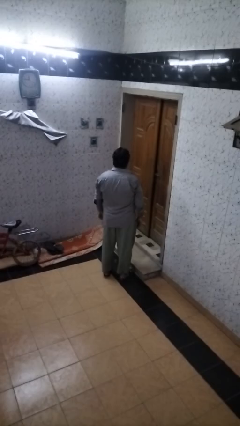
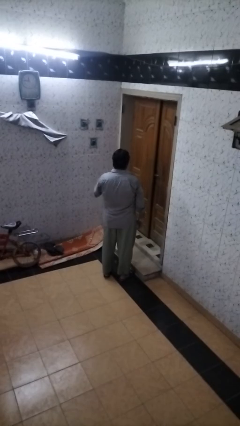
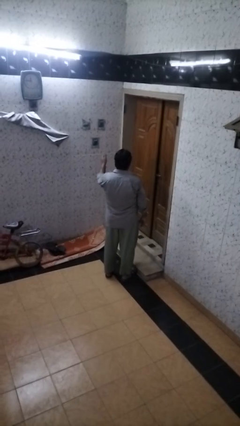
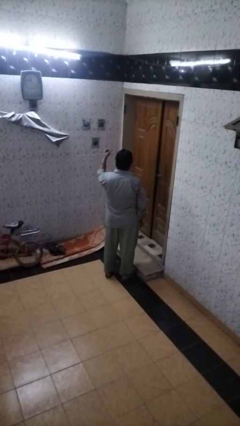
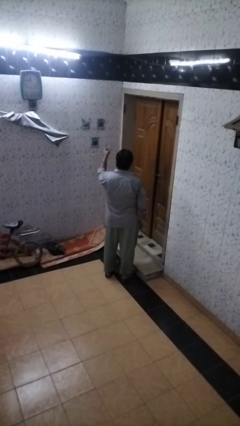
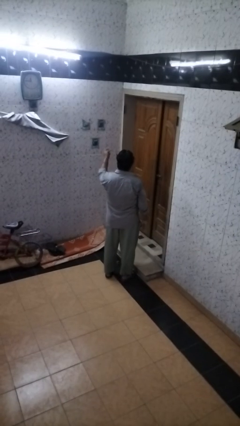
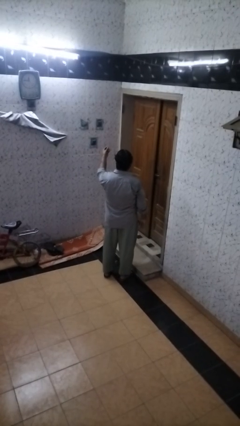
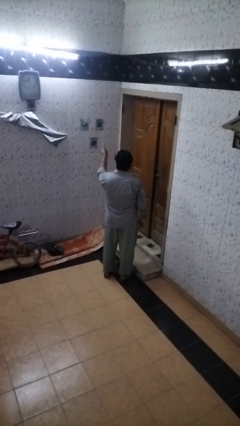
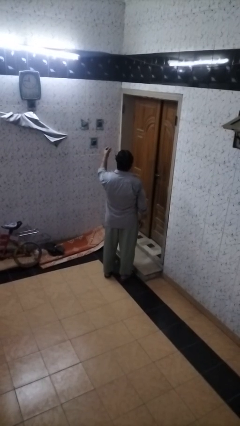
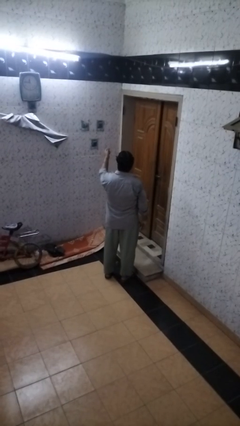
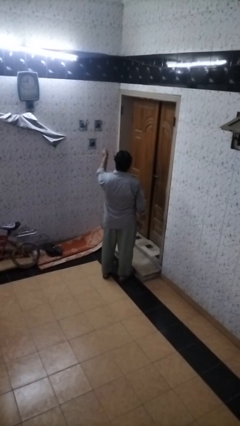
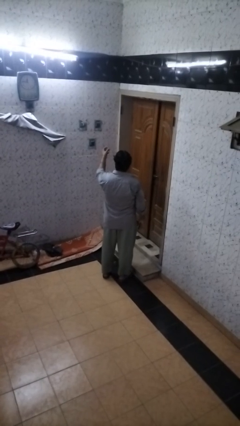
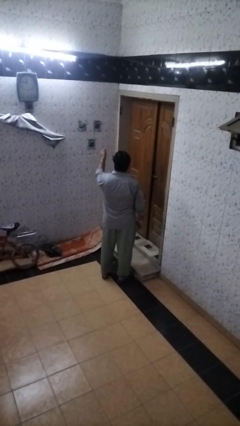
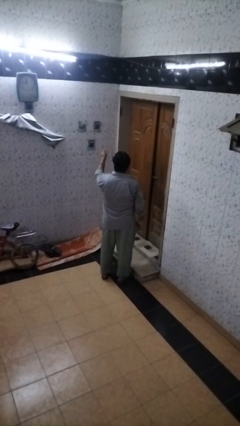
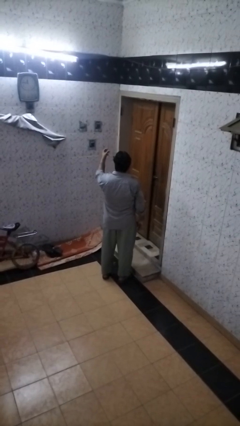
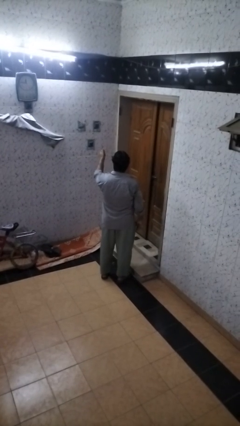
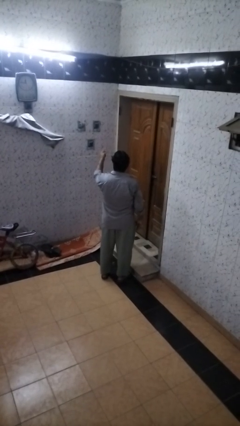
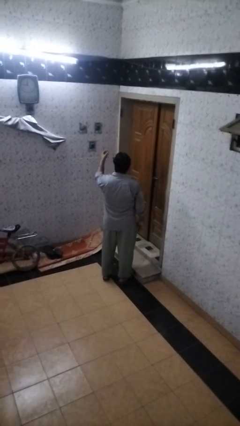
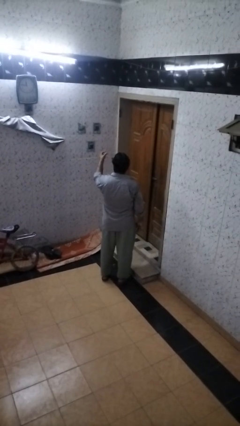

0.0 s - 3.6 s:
person snaps fingers

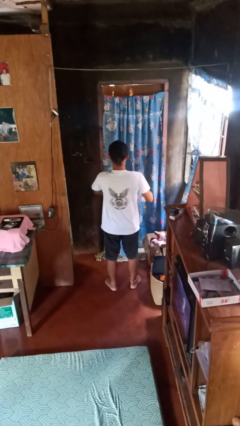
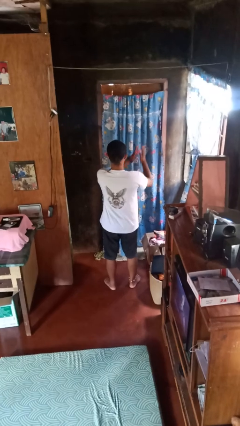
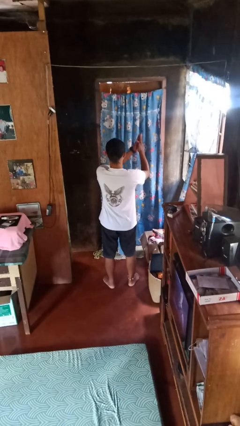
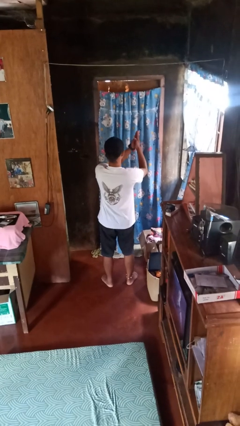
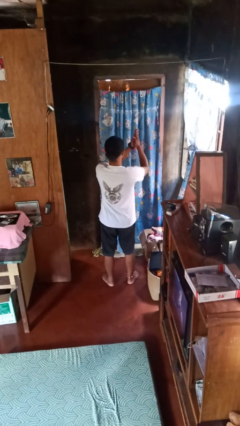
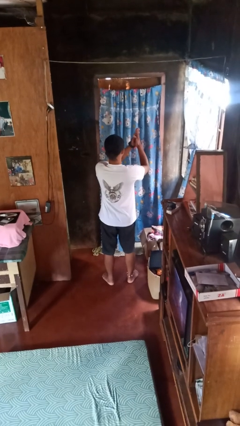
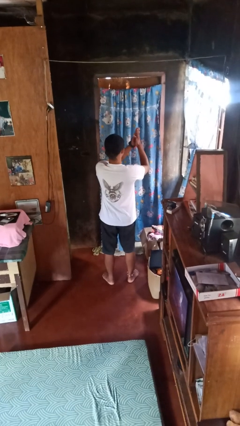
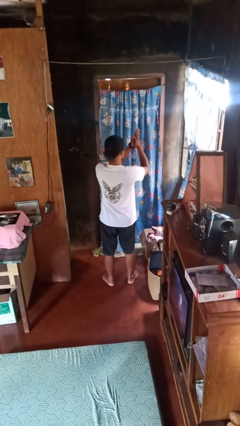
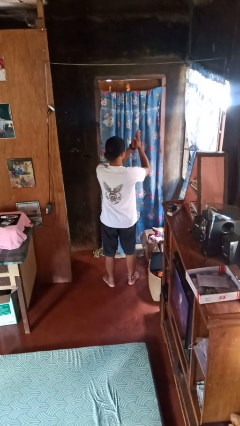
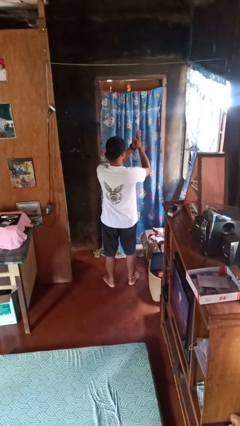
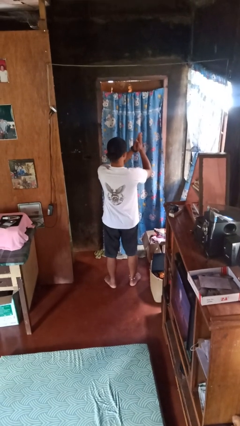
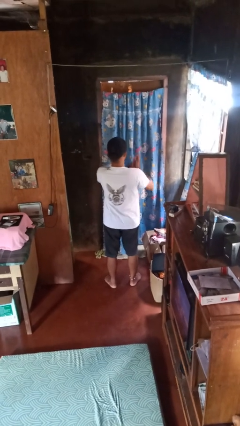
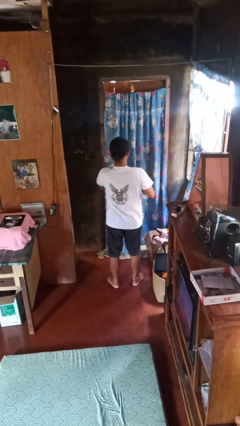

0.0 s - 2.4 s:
person prays

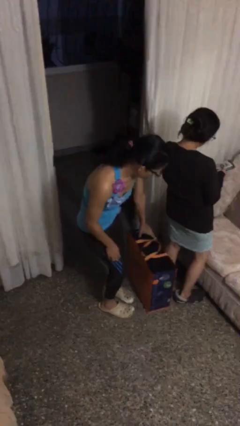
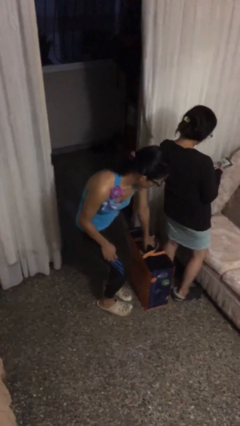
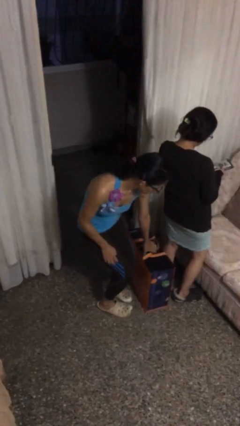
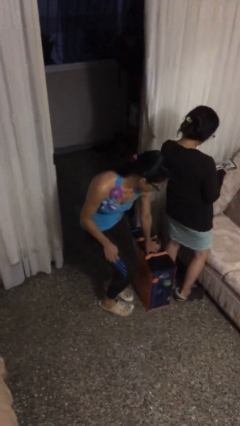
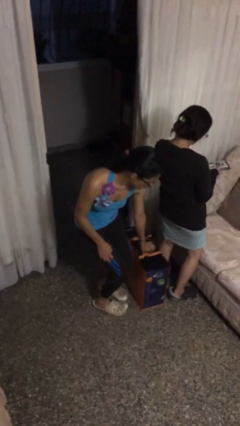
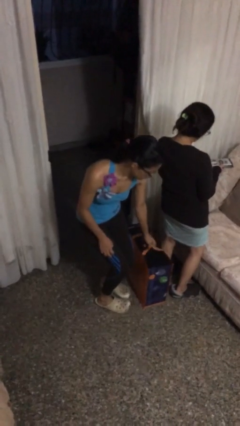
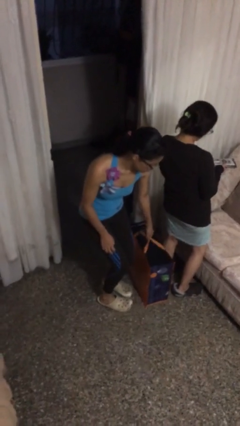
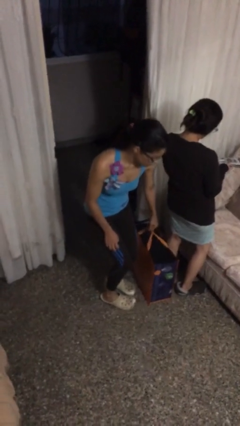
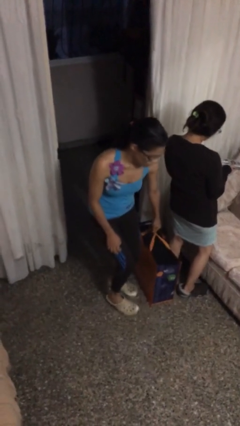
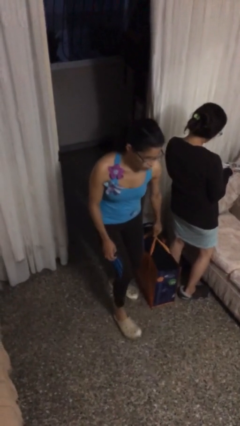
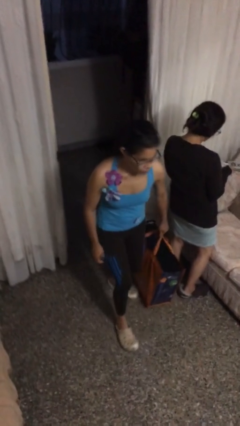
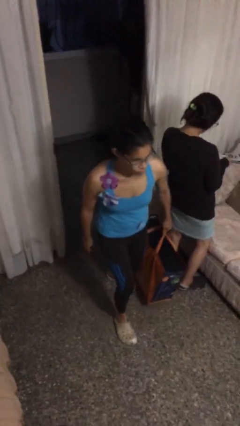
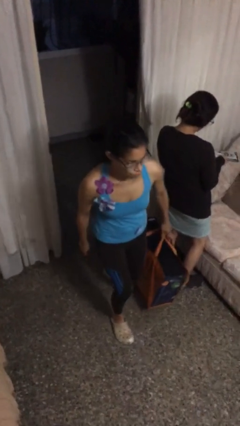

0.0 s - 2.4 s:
person steals object from person

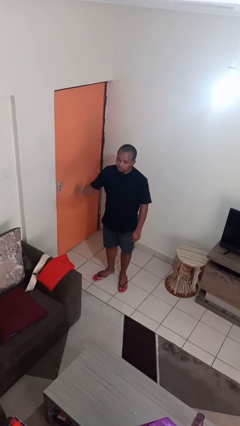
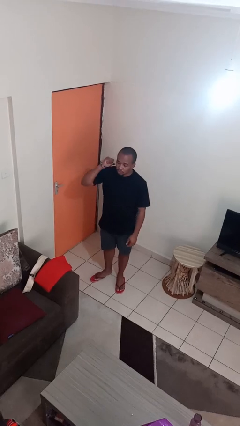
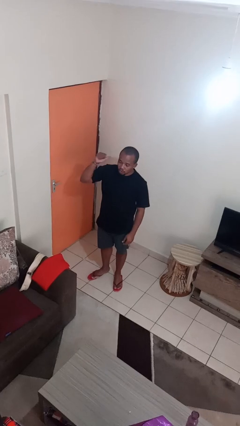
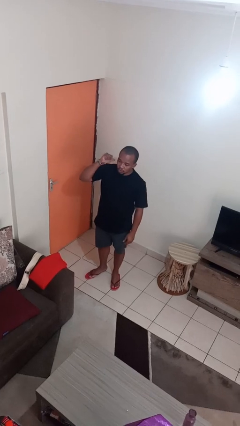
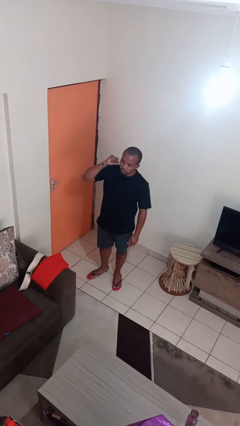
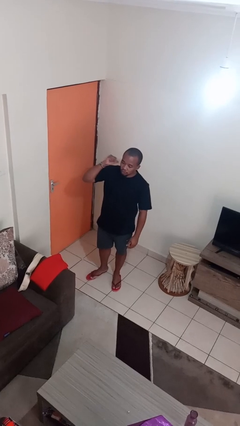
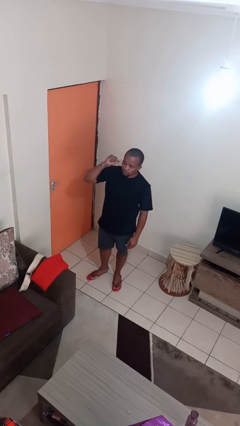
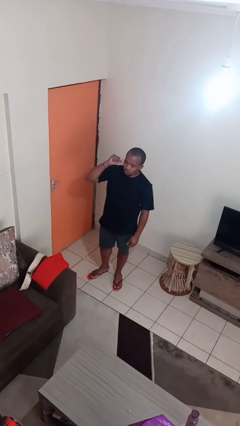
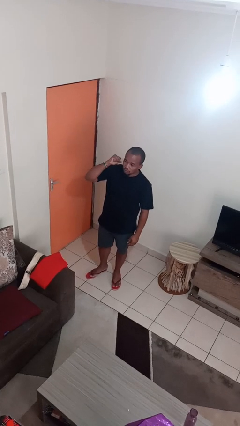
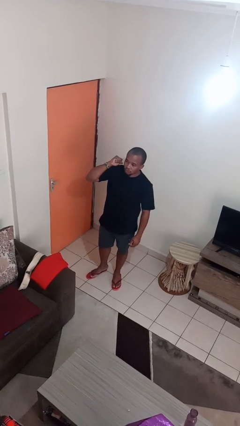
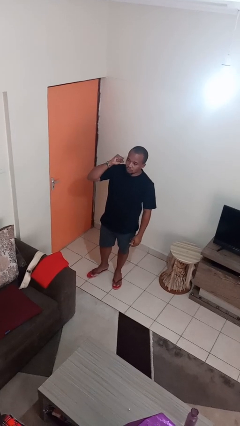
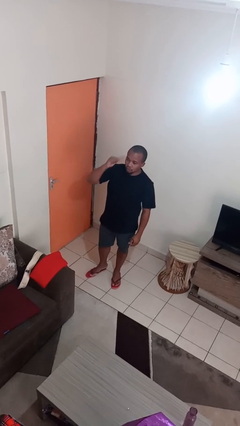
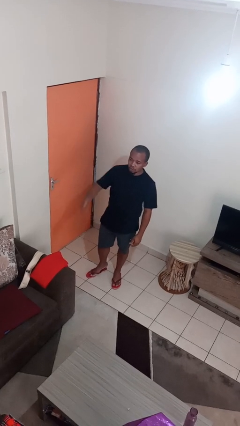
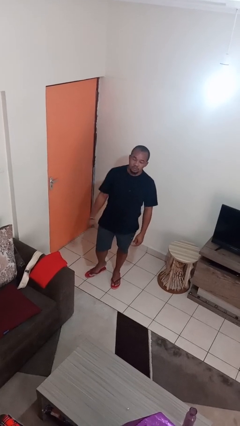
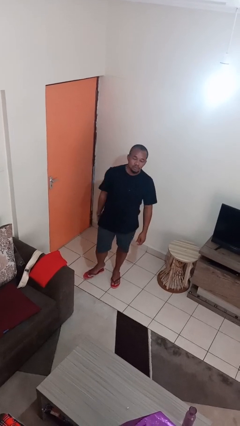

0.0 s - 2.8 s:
person gestures behind me

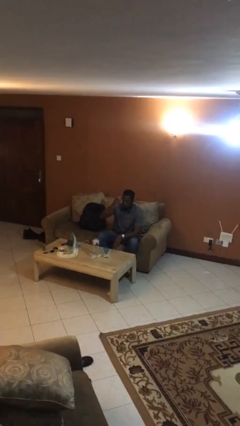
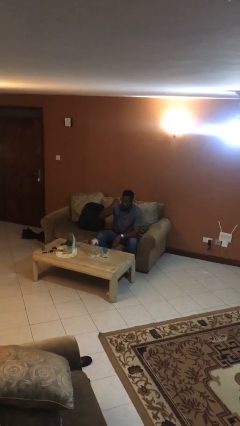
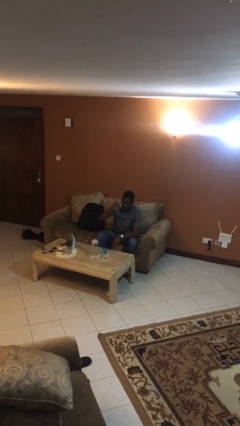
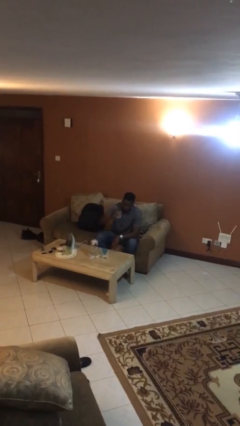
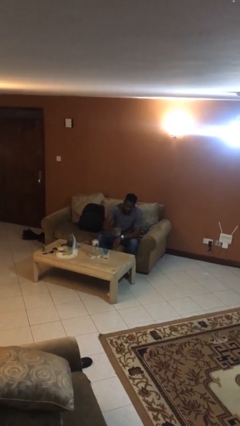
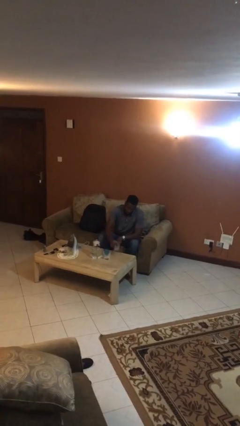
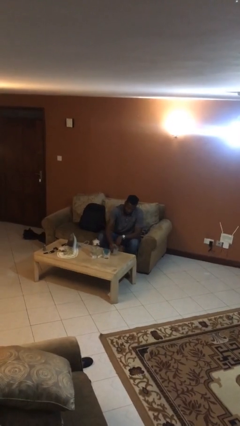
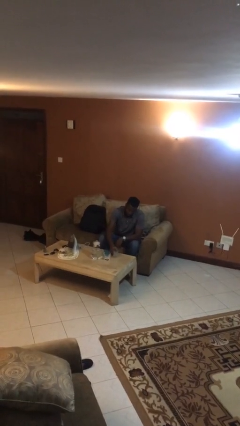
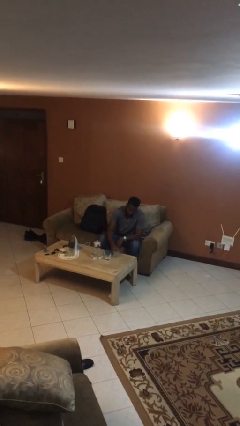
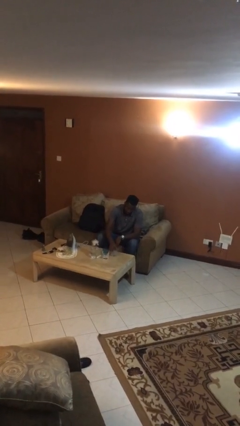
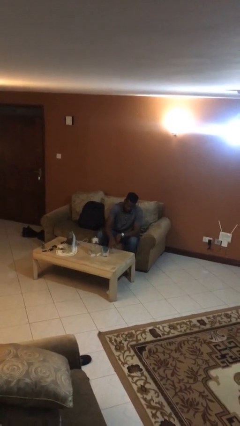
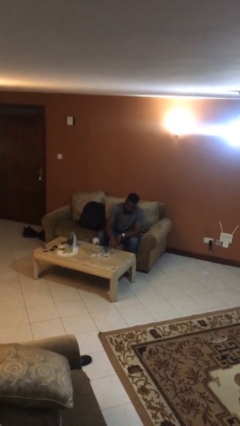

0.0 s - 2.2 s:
person puts down object on table

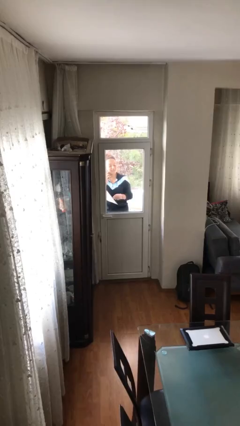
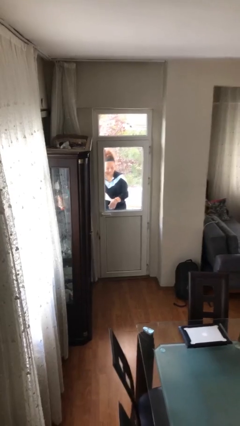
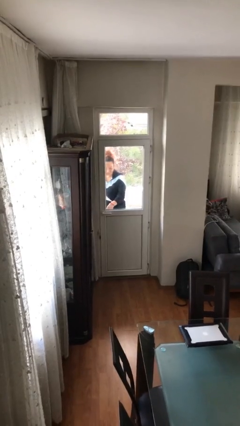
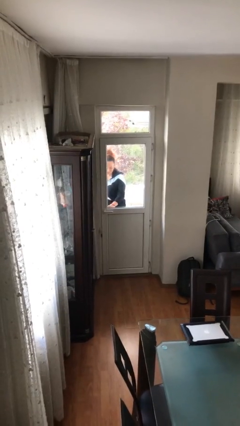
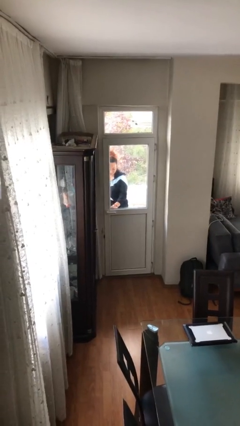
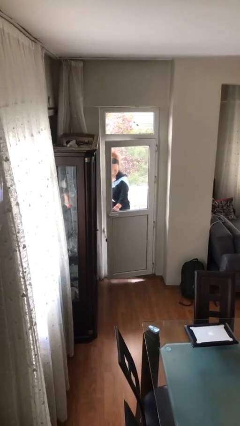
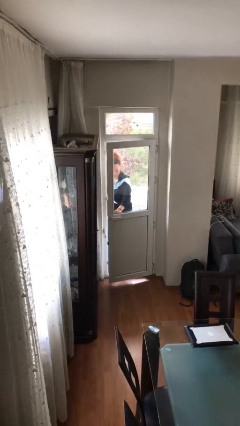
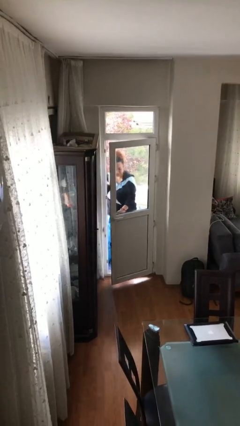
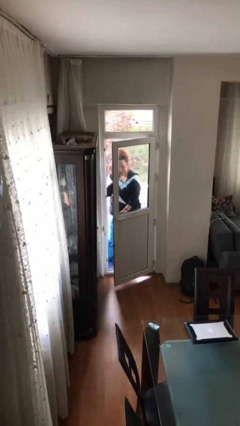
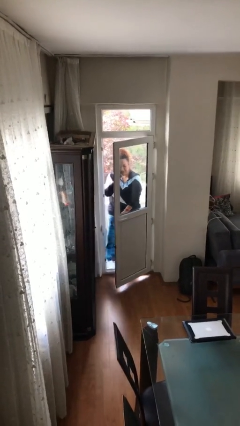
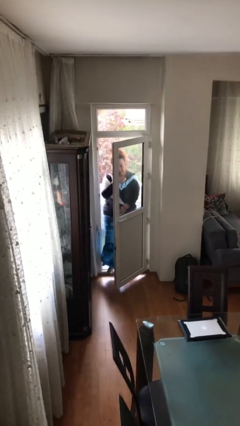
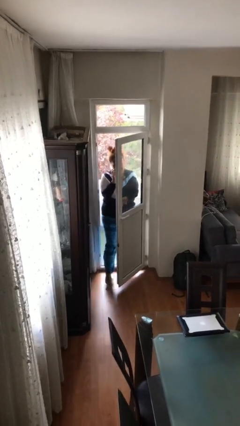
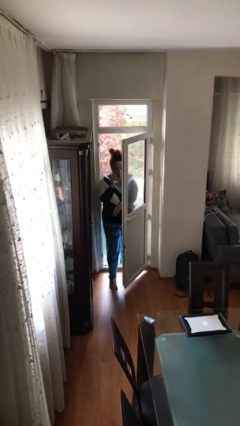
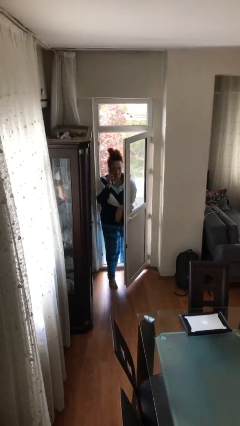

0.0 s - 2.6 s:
person opens facility door

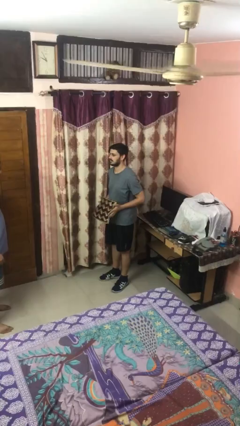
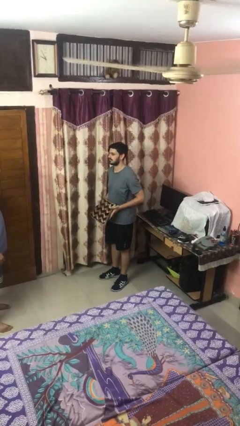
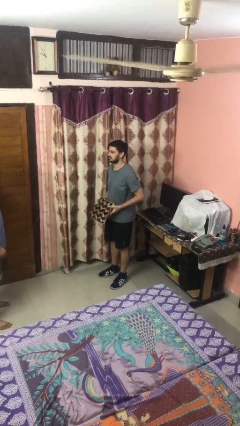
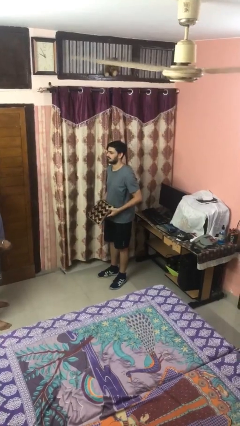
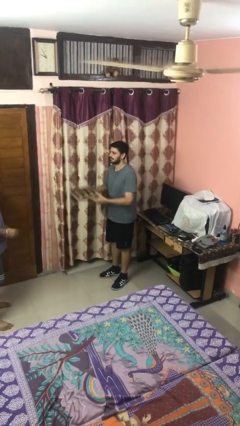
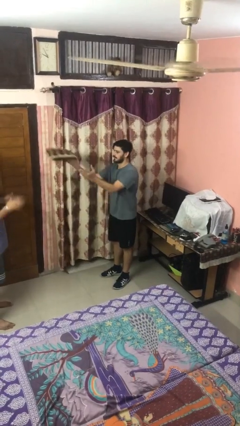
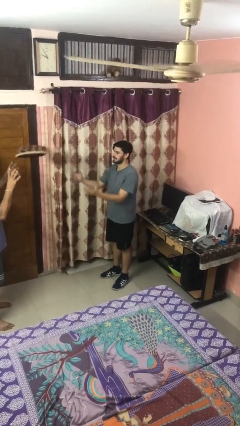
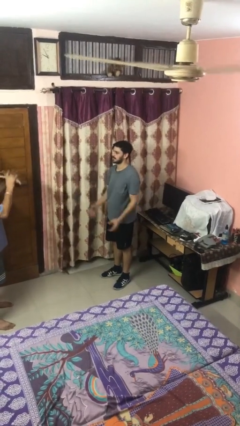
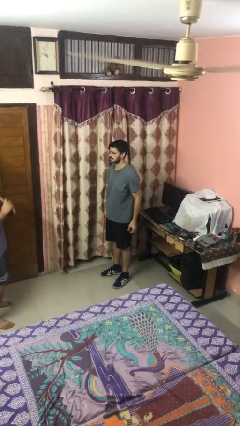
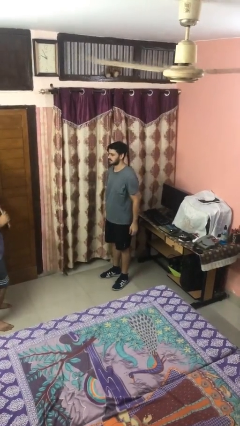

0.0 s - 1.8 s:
person throws object to person
